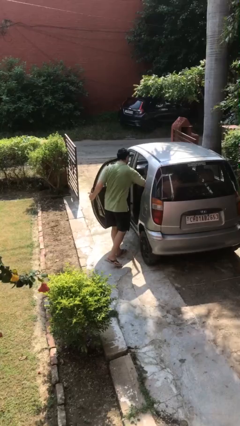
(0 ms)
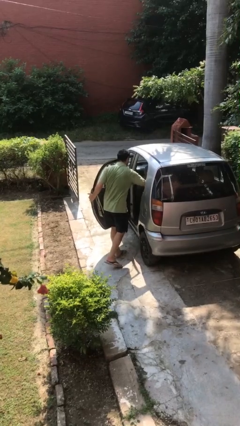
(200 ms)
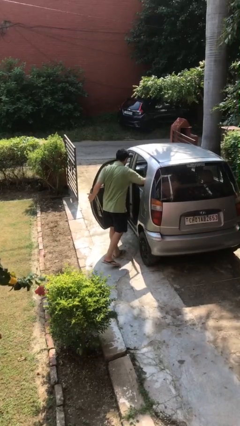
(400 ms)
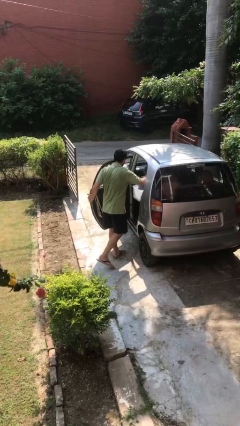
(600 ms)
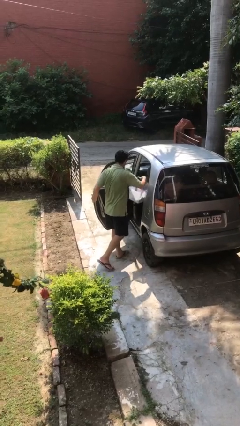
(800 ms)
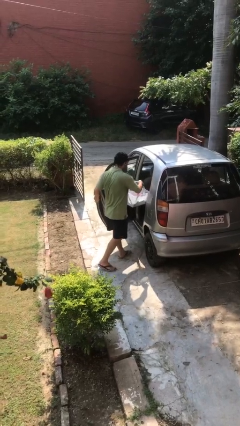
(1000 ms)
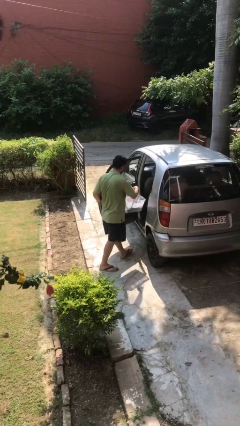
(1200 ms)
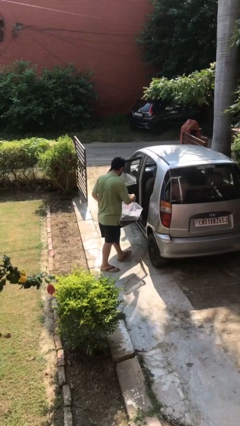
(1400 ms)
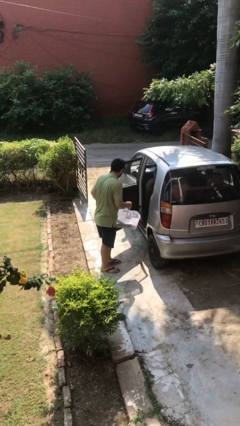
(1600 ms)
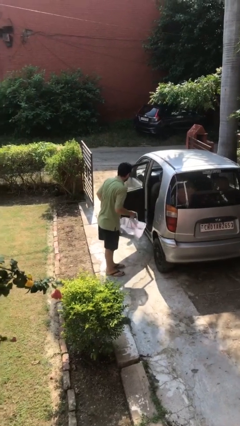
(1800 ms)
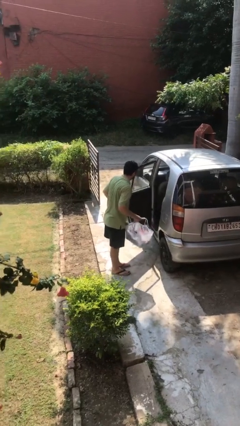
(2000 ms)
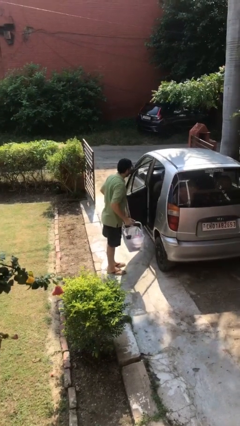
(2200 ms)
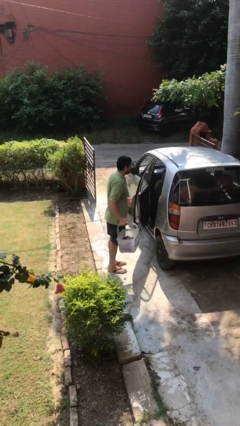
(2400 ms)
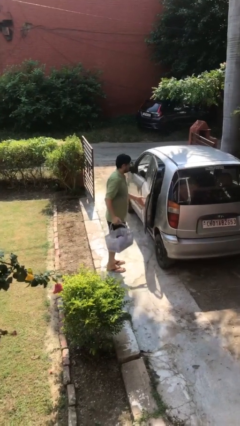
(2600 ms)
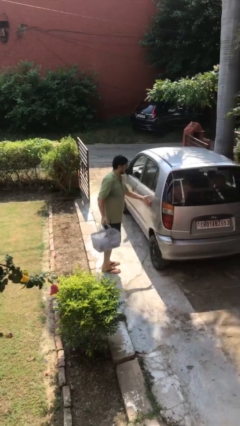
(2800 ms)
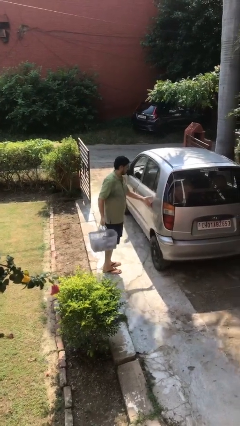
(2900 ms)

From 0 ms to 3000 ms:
person unloads car

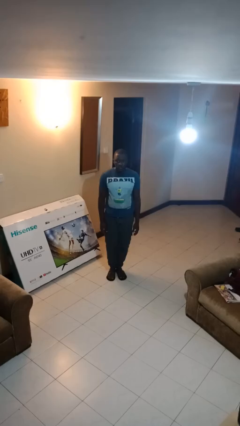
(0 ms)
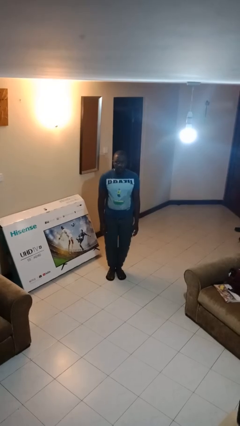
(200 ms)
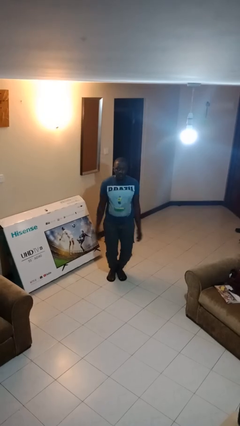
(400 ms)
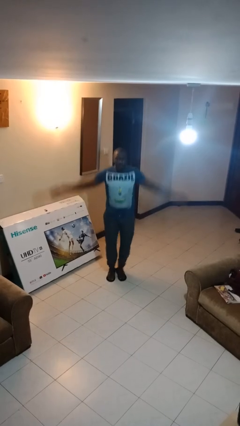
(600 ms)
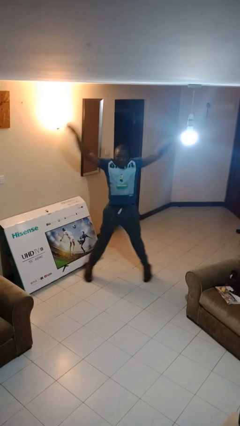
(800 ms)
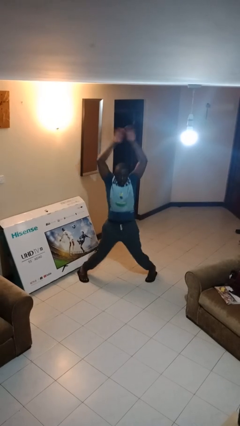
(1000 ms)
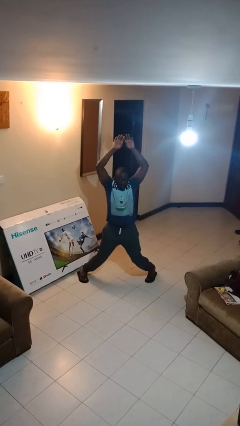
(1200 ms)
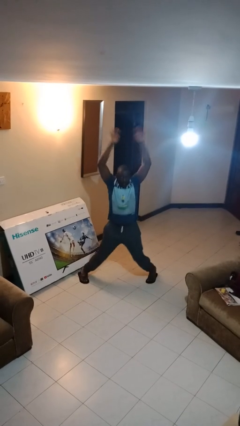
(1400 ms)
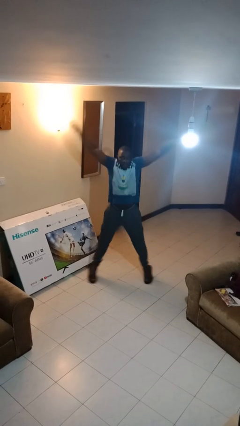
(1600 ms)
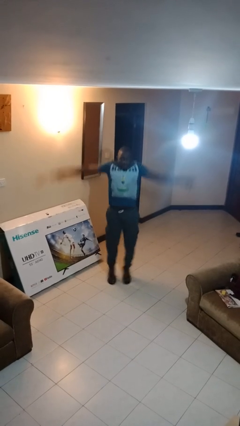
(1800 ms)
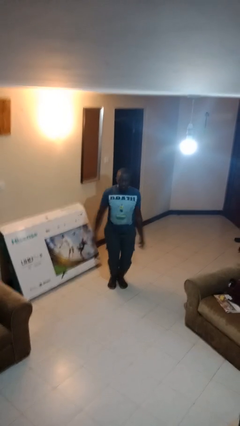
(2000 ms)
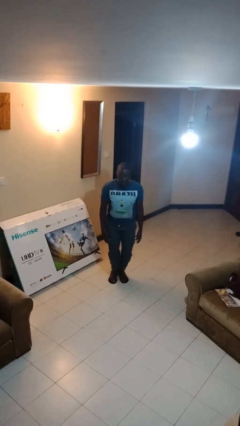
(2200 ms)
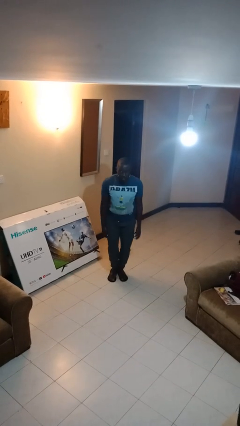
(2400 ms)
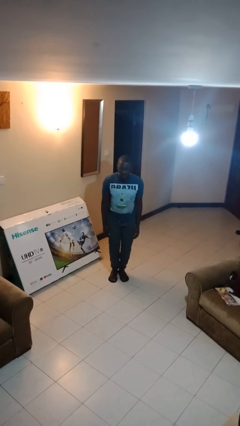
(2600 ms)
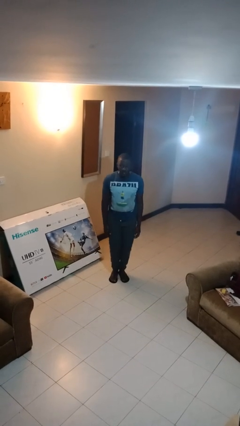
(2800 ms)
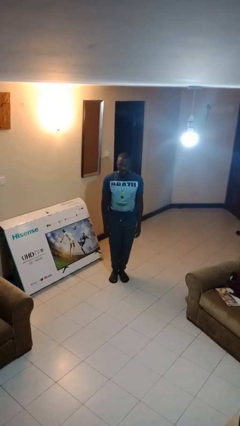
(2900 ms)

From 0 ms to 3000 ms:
person exercises with jumping jacks

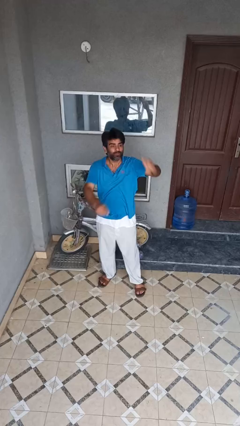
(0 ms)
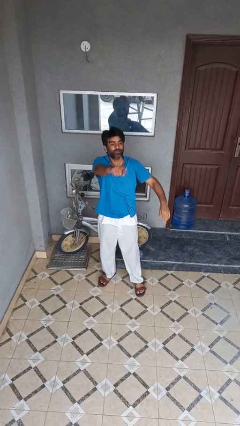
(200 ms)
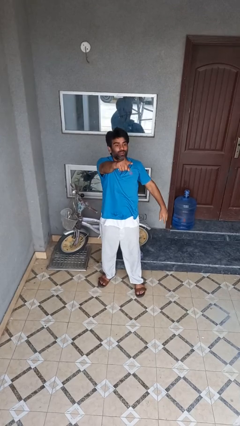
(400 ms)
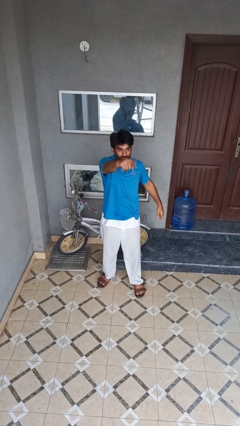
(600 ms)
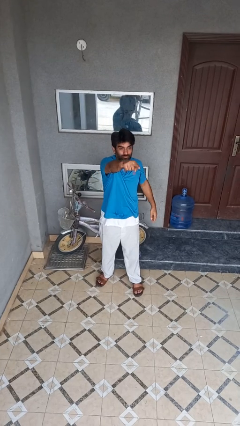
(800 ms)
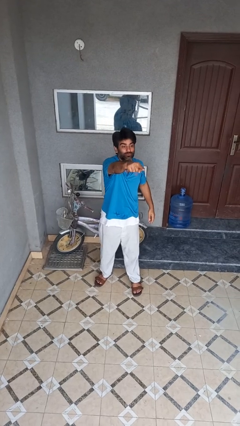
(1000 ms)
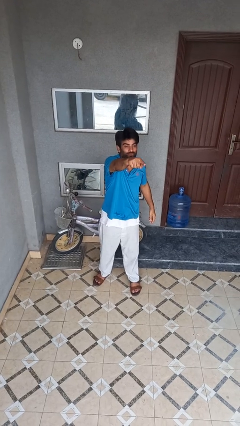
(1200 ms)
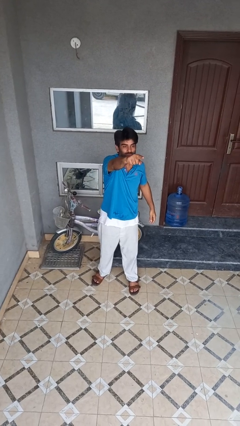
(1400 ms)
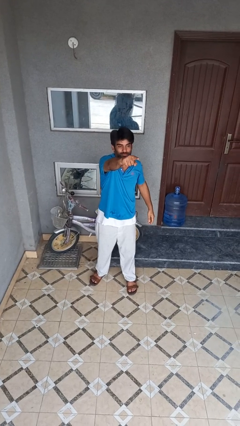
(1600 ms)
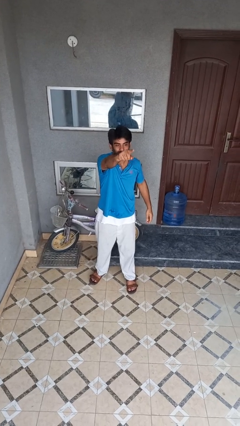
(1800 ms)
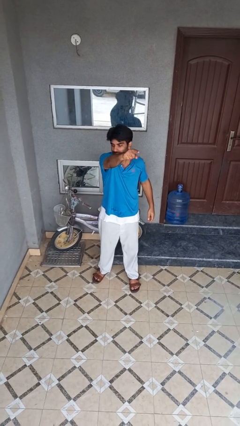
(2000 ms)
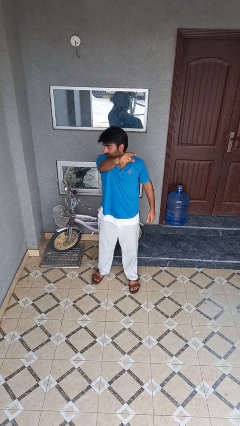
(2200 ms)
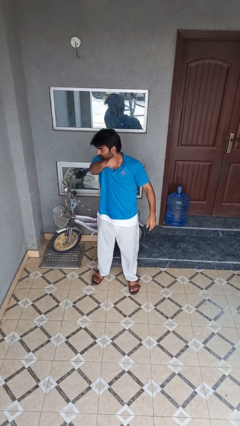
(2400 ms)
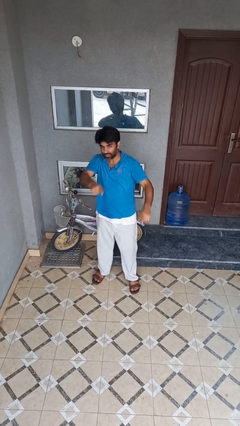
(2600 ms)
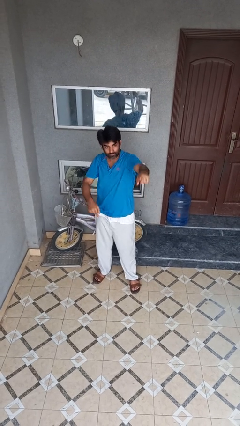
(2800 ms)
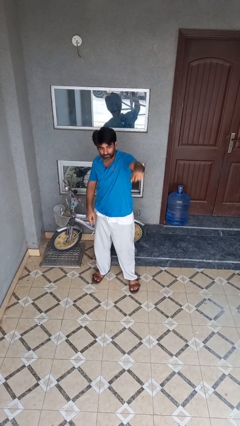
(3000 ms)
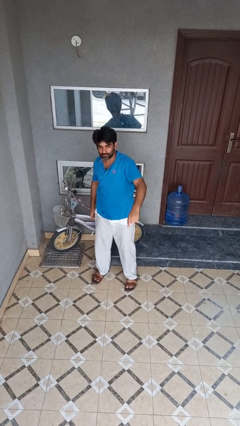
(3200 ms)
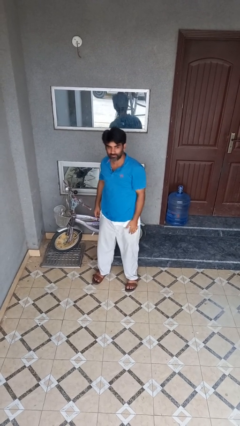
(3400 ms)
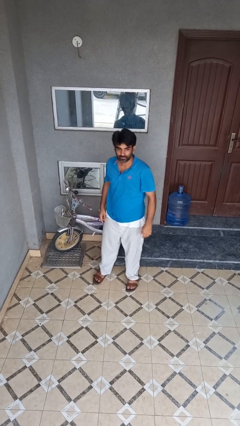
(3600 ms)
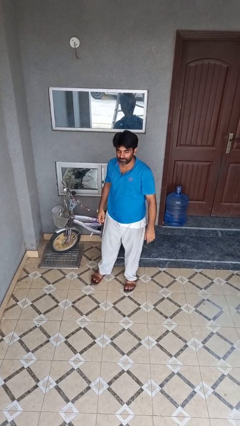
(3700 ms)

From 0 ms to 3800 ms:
person points at person

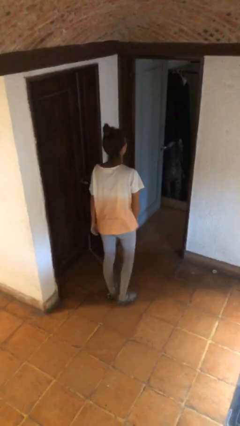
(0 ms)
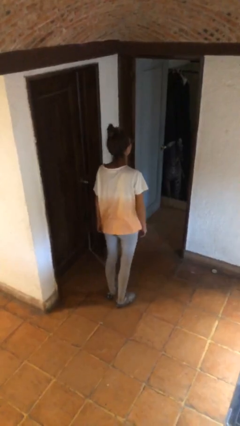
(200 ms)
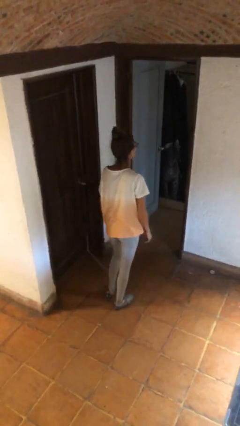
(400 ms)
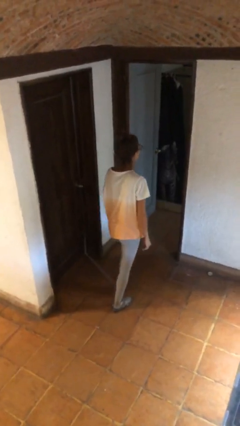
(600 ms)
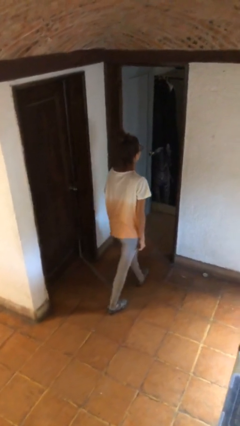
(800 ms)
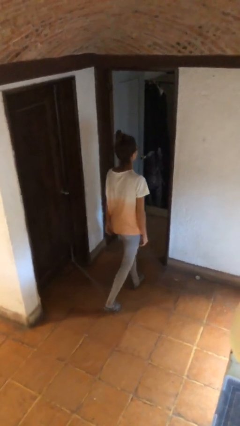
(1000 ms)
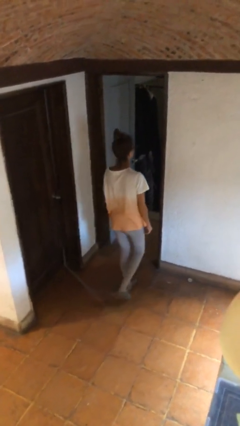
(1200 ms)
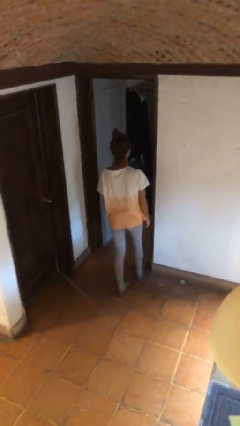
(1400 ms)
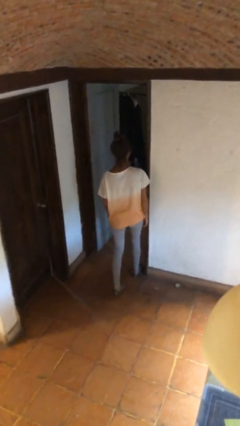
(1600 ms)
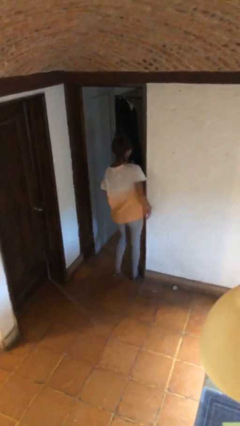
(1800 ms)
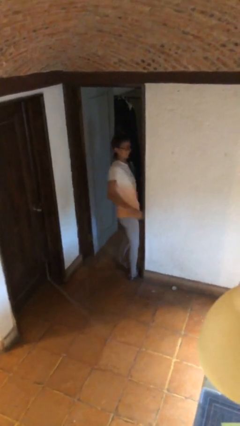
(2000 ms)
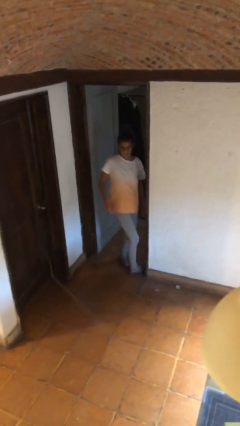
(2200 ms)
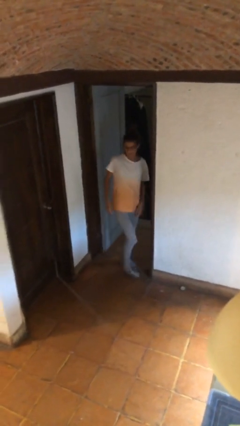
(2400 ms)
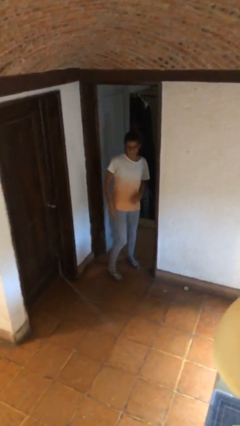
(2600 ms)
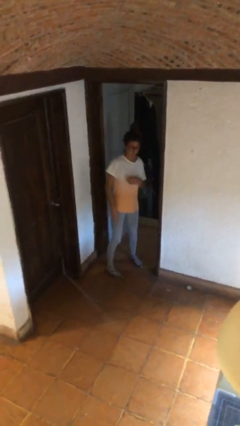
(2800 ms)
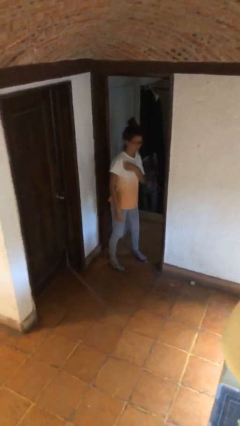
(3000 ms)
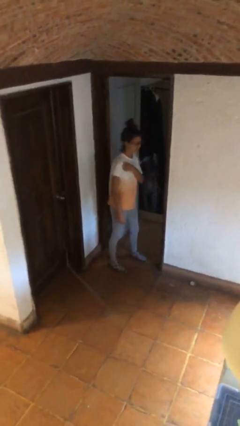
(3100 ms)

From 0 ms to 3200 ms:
person bumps into wall

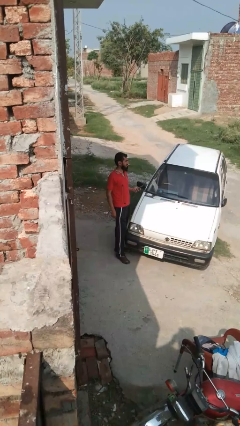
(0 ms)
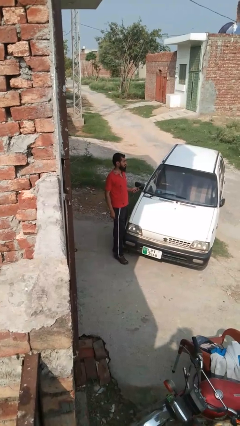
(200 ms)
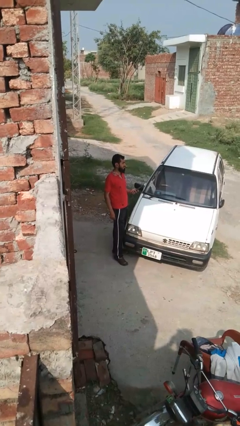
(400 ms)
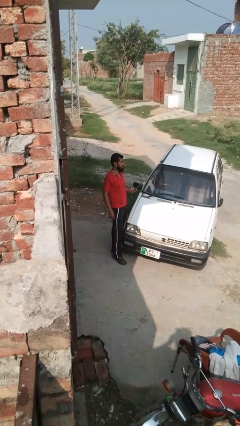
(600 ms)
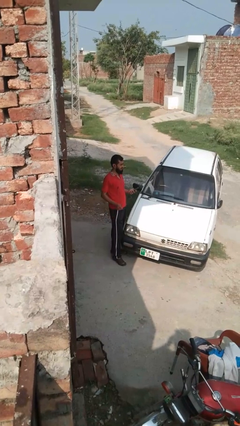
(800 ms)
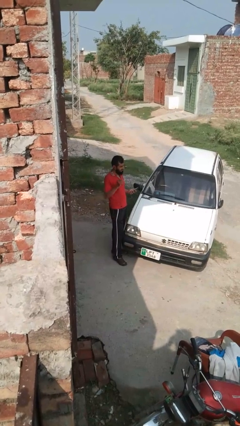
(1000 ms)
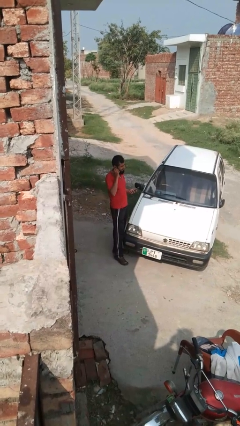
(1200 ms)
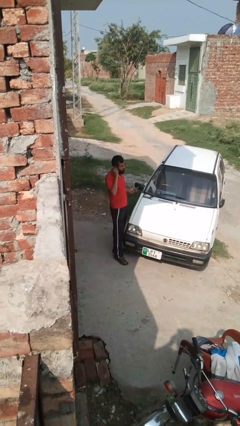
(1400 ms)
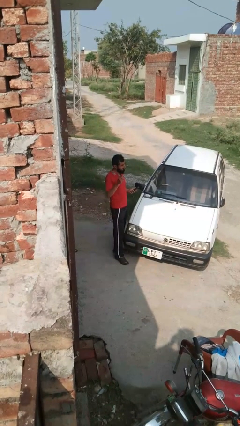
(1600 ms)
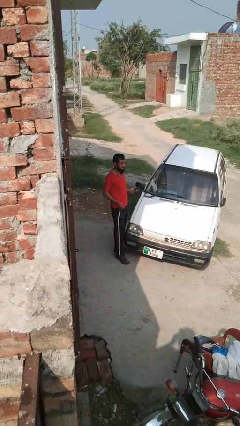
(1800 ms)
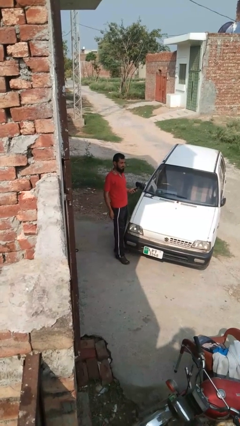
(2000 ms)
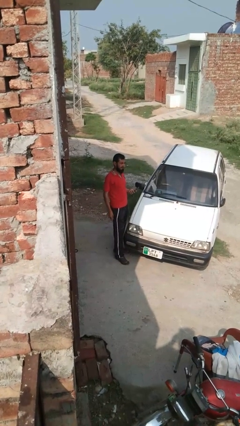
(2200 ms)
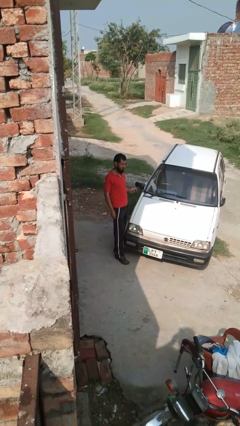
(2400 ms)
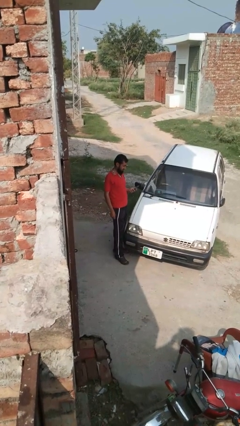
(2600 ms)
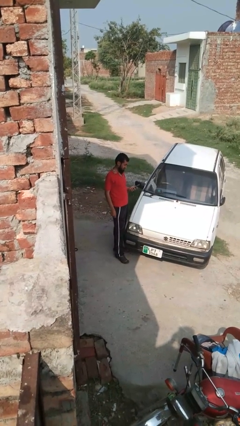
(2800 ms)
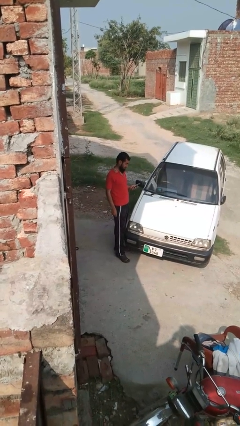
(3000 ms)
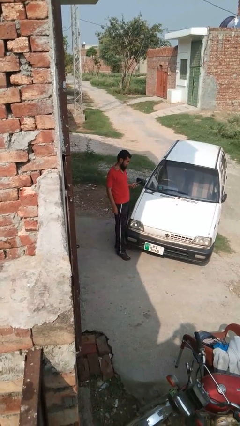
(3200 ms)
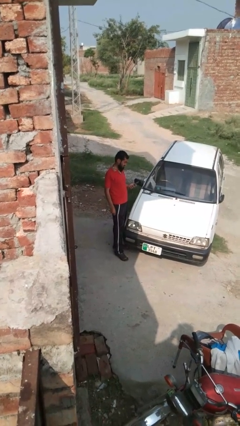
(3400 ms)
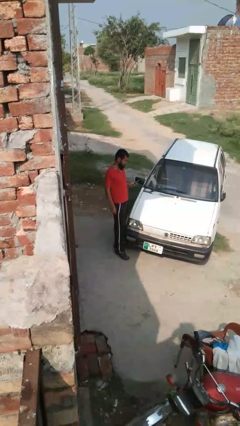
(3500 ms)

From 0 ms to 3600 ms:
person takes off headphones

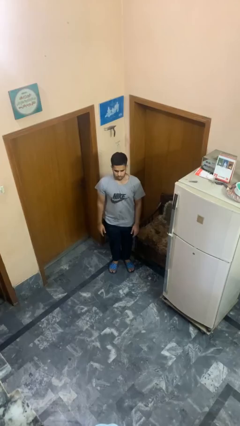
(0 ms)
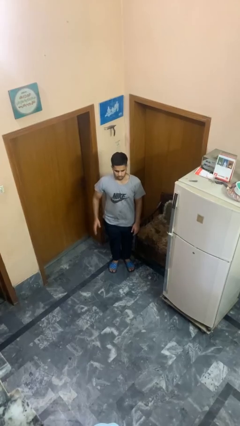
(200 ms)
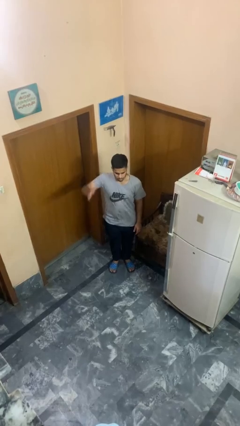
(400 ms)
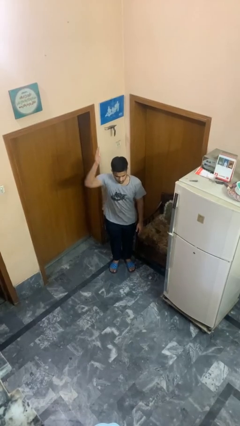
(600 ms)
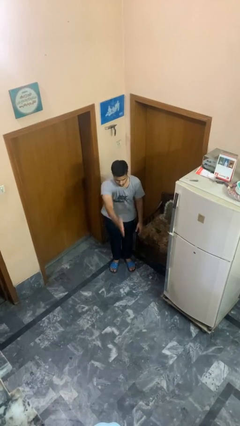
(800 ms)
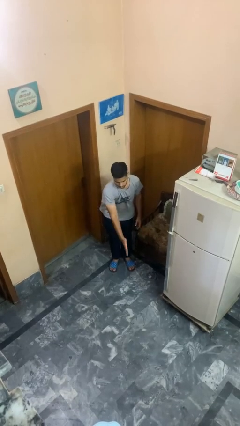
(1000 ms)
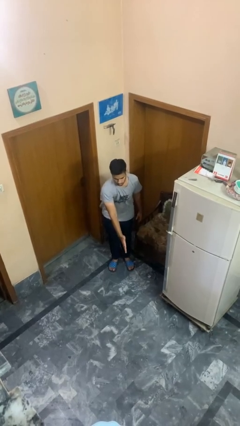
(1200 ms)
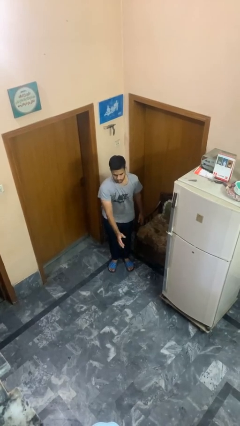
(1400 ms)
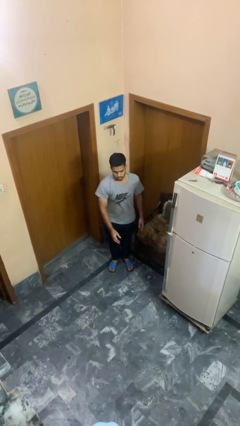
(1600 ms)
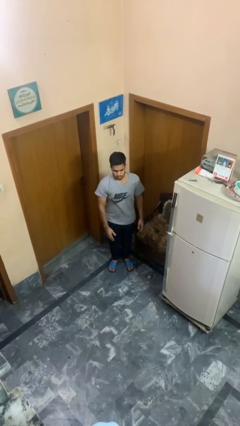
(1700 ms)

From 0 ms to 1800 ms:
person karate chop
